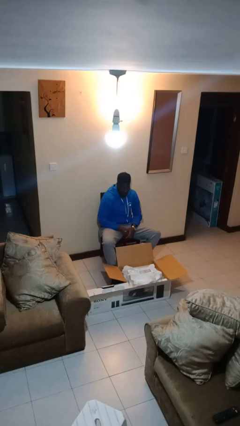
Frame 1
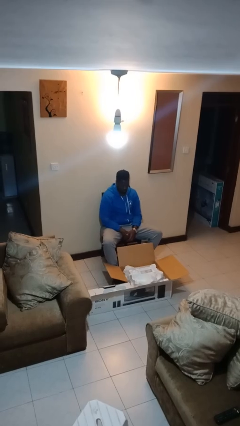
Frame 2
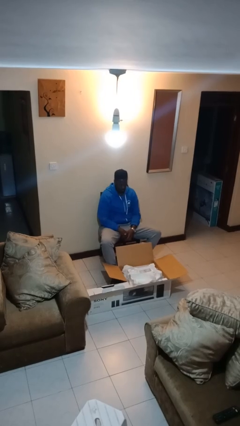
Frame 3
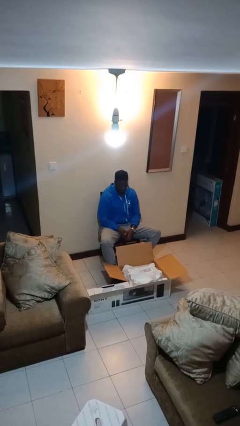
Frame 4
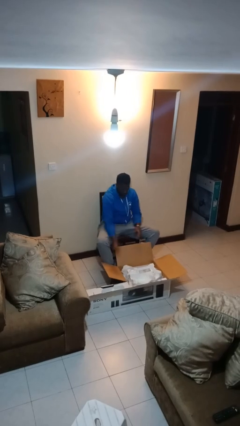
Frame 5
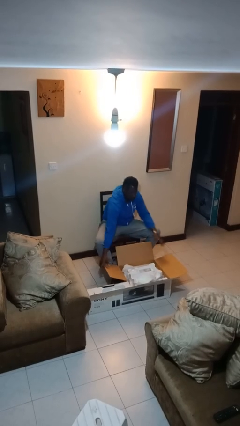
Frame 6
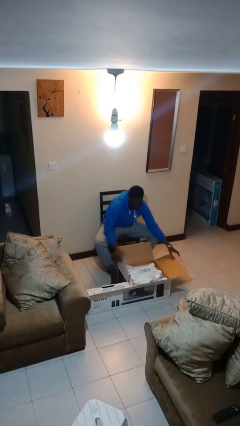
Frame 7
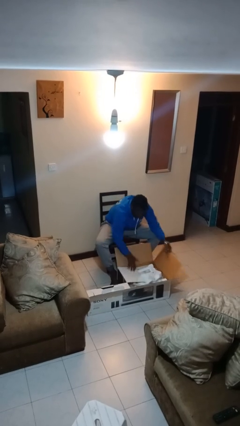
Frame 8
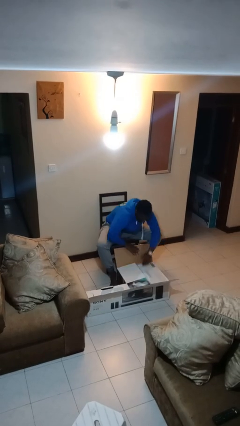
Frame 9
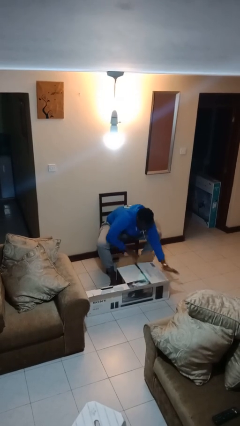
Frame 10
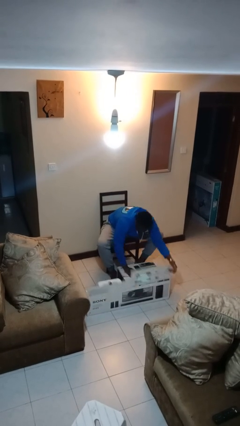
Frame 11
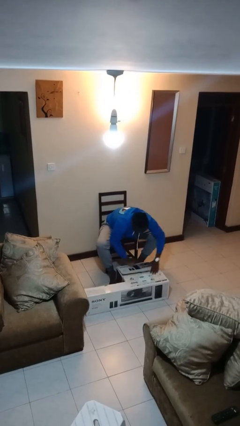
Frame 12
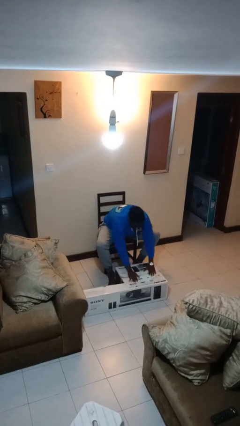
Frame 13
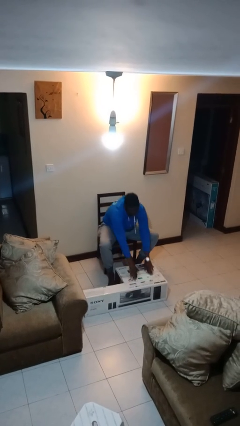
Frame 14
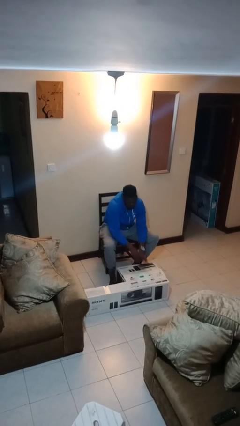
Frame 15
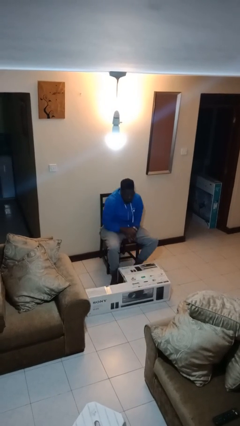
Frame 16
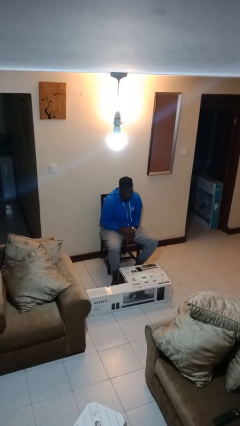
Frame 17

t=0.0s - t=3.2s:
person closes box

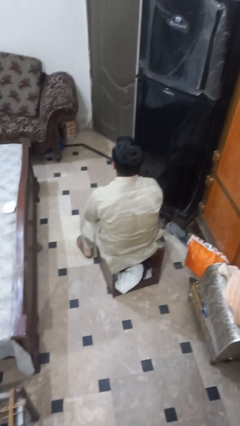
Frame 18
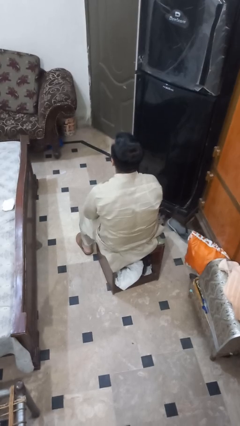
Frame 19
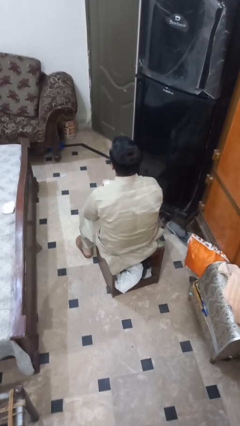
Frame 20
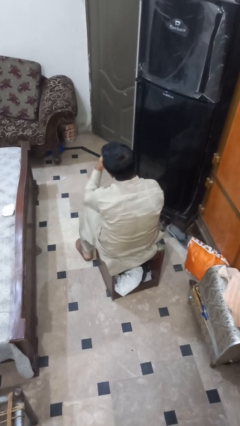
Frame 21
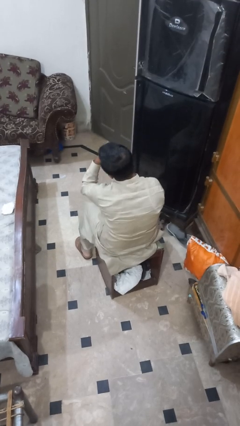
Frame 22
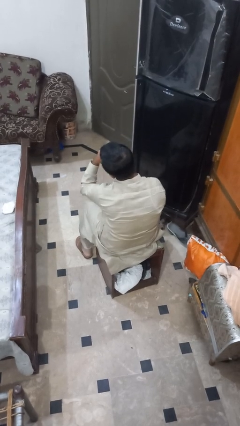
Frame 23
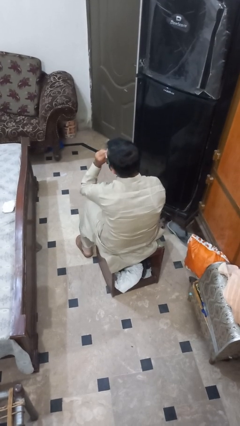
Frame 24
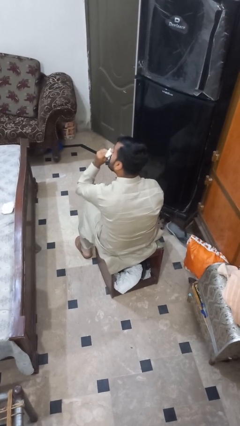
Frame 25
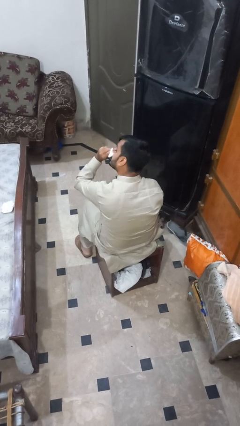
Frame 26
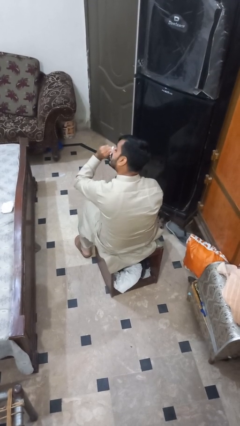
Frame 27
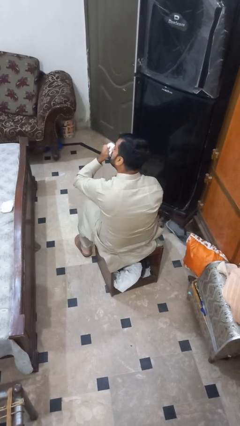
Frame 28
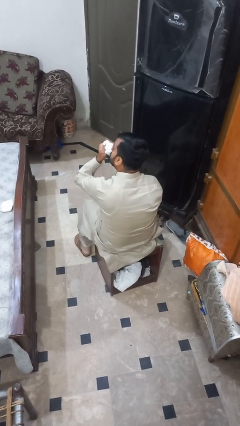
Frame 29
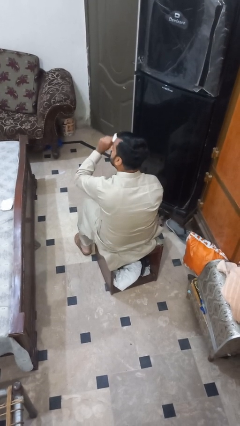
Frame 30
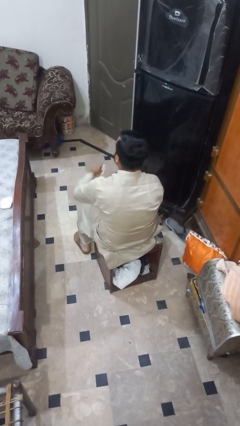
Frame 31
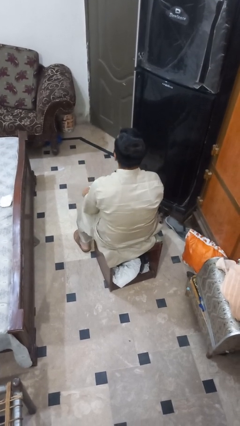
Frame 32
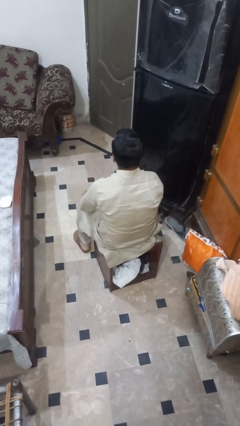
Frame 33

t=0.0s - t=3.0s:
person blows nose

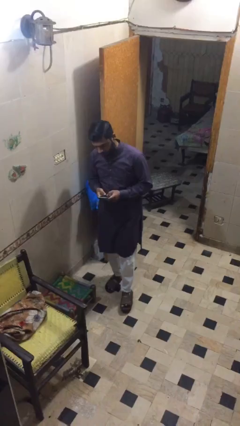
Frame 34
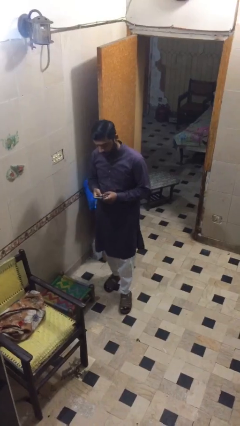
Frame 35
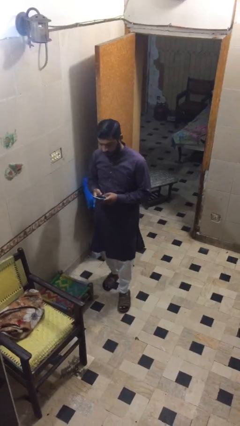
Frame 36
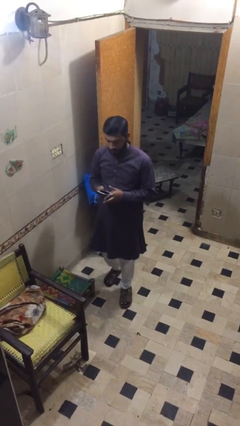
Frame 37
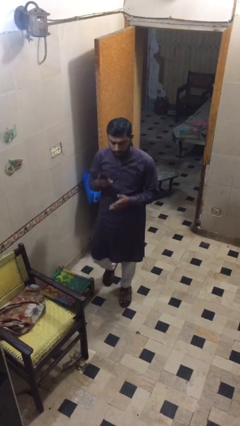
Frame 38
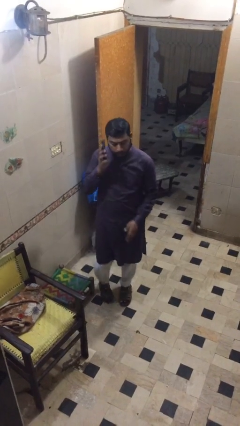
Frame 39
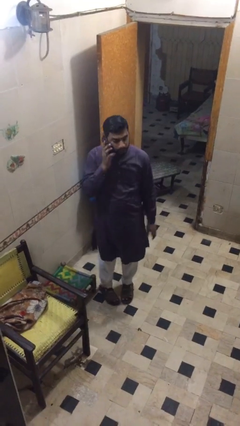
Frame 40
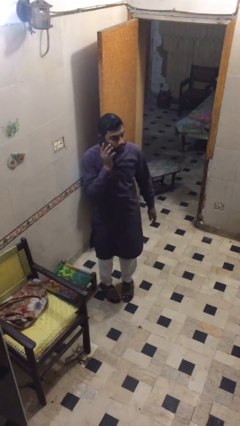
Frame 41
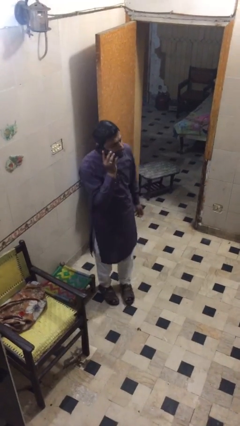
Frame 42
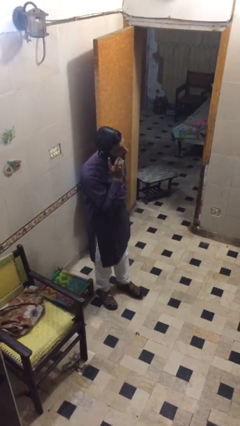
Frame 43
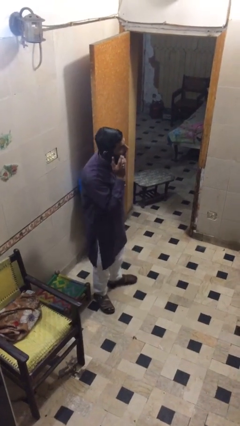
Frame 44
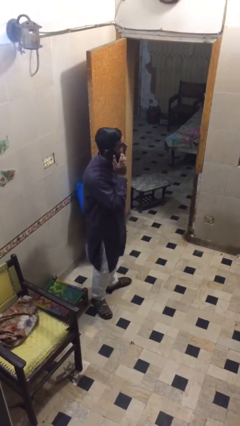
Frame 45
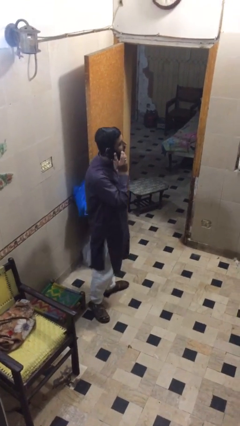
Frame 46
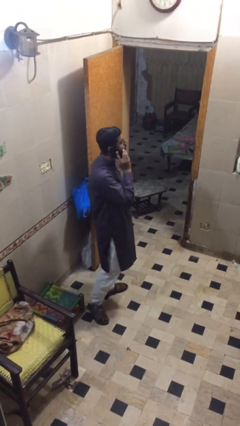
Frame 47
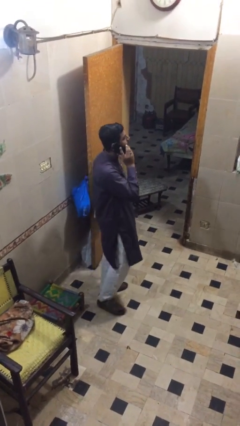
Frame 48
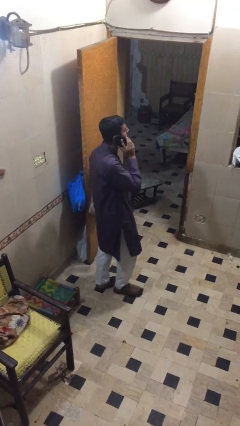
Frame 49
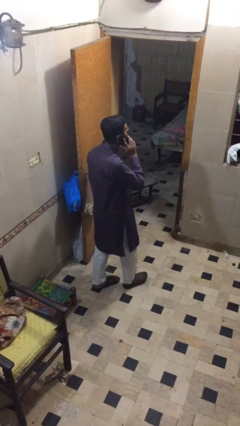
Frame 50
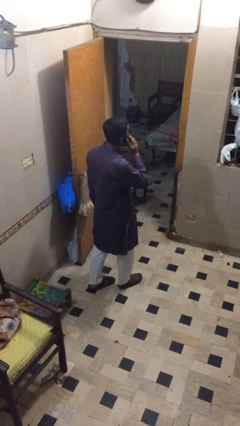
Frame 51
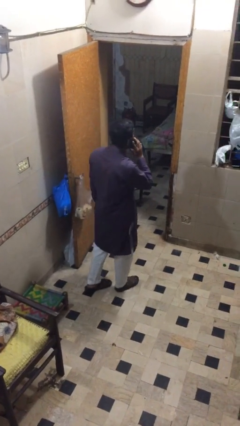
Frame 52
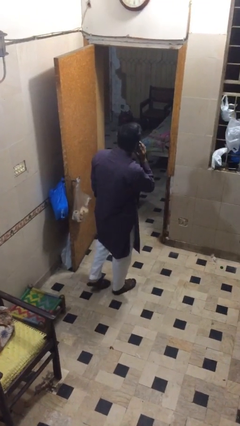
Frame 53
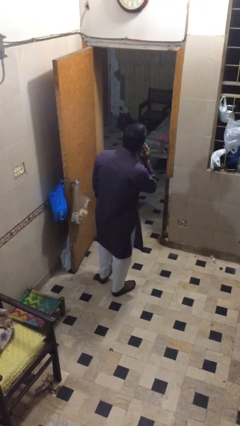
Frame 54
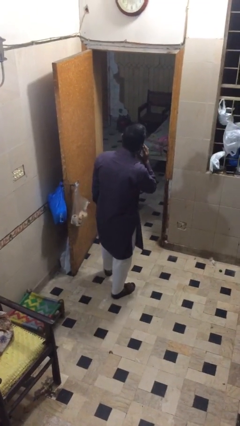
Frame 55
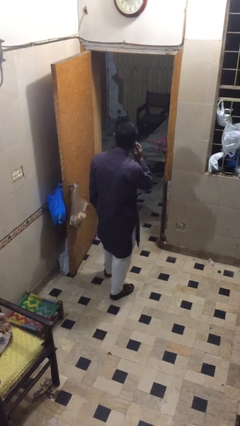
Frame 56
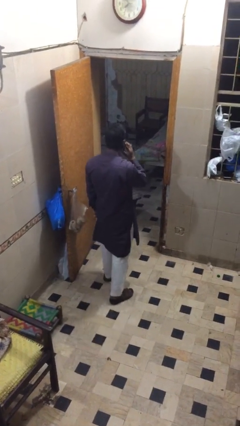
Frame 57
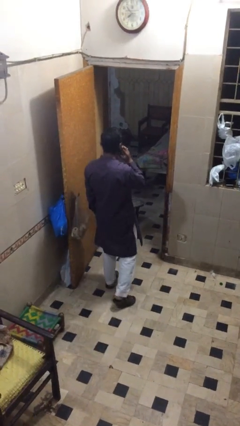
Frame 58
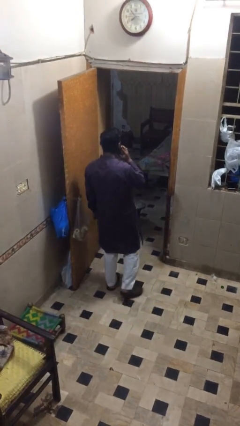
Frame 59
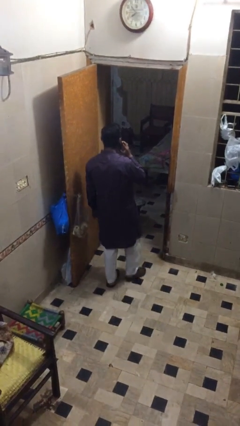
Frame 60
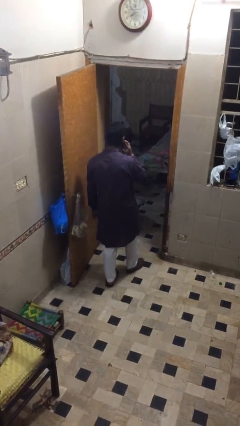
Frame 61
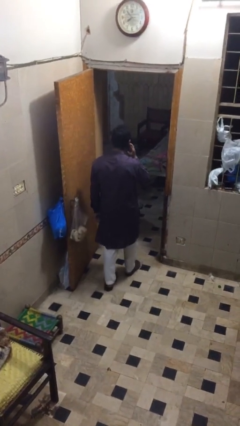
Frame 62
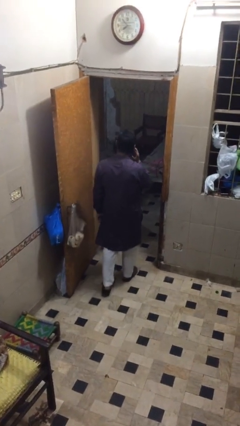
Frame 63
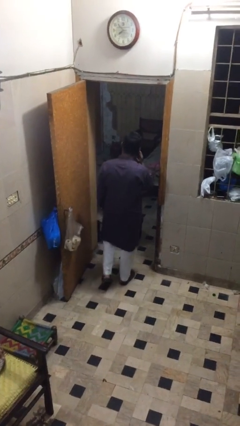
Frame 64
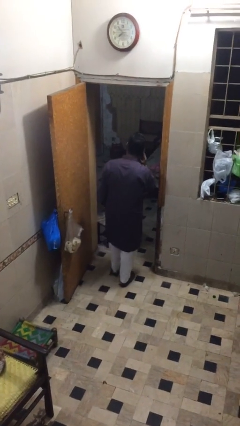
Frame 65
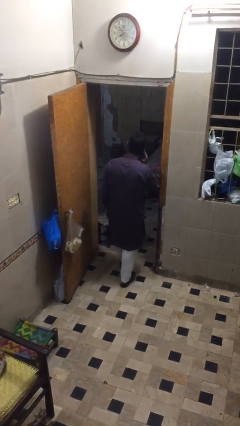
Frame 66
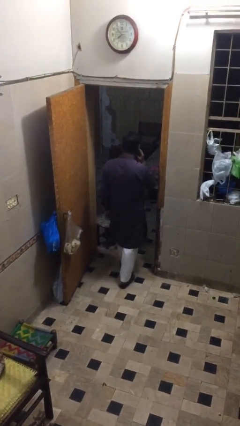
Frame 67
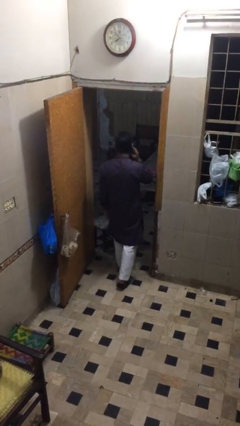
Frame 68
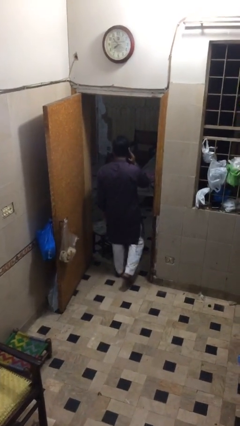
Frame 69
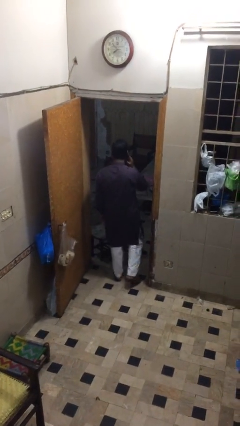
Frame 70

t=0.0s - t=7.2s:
person talks on phone

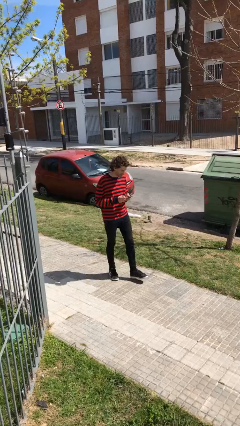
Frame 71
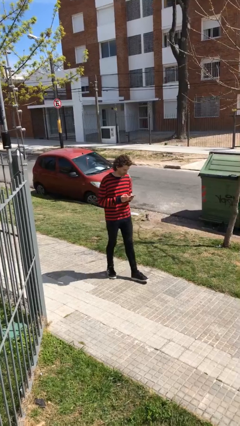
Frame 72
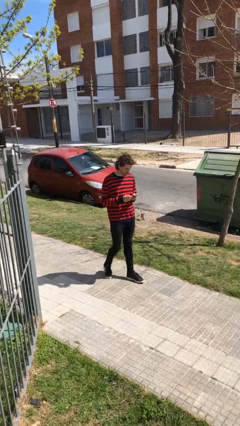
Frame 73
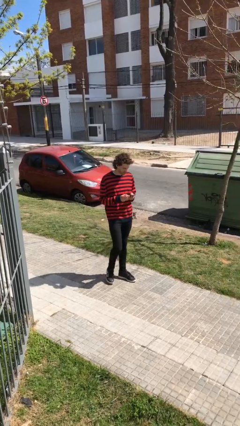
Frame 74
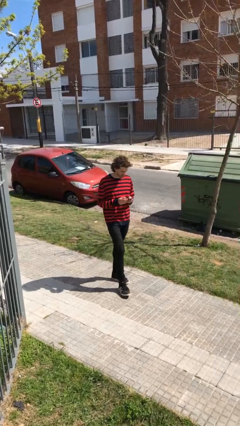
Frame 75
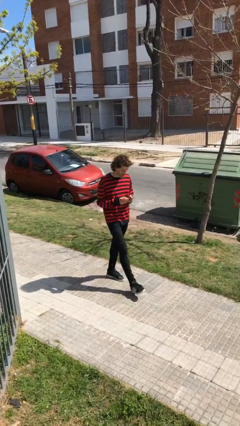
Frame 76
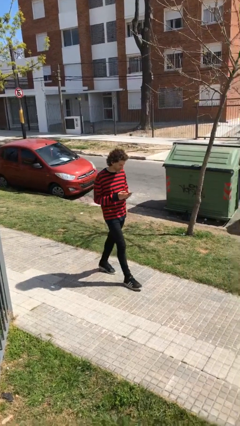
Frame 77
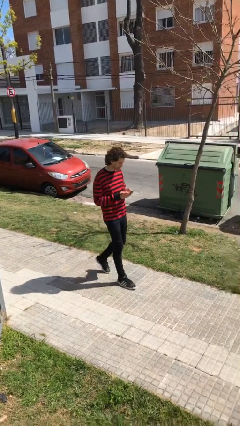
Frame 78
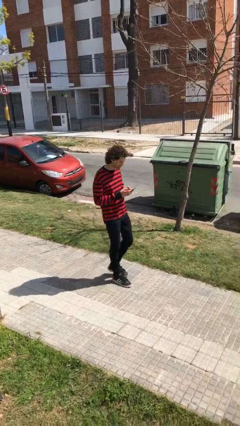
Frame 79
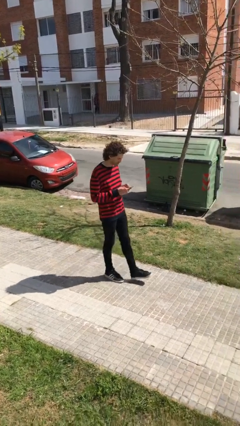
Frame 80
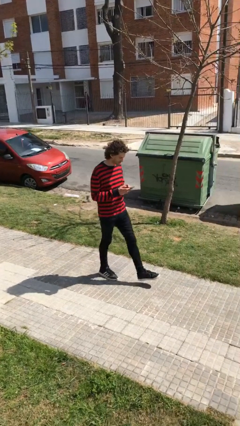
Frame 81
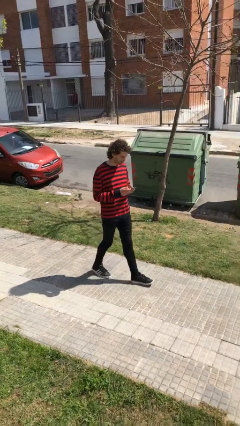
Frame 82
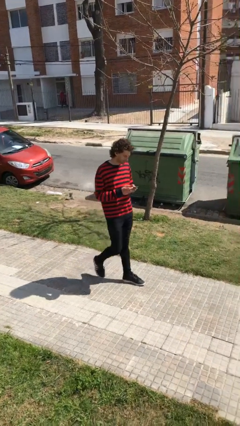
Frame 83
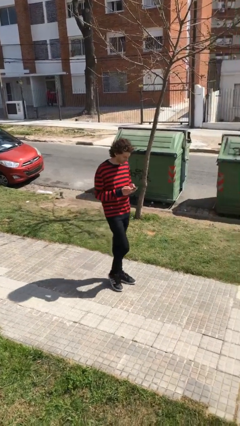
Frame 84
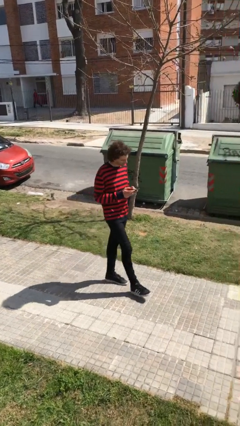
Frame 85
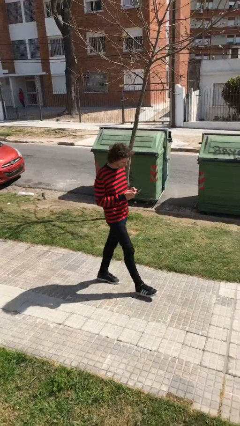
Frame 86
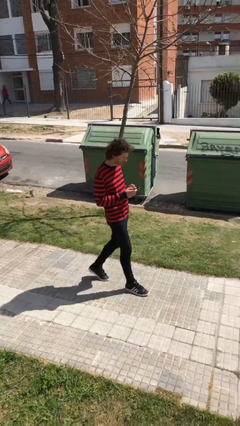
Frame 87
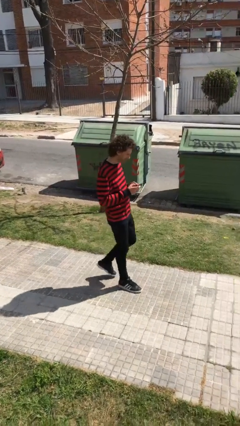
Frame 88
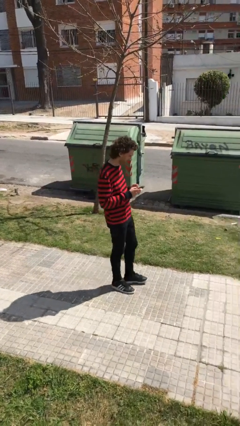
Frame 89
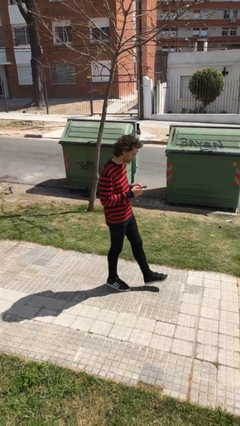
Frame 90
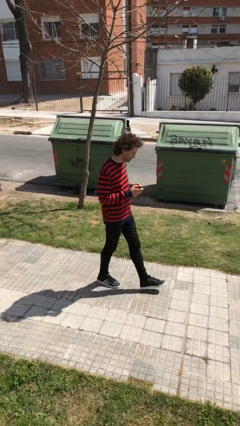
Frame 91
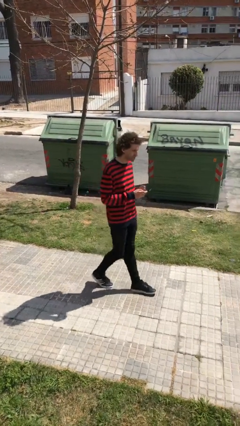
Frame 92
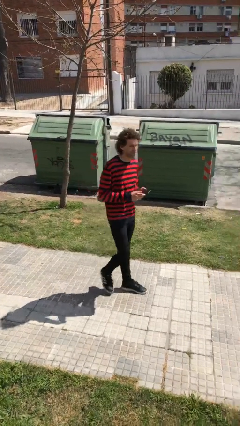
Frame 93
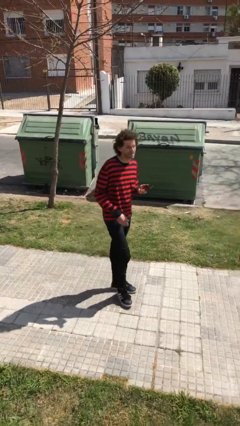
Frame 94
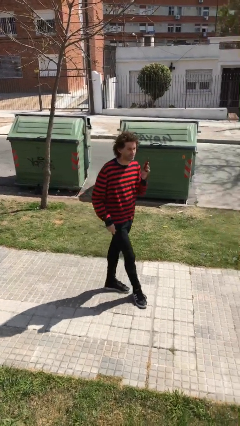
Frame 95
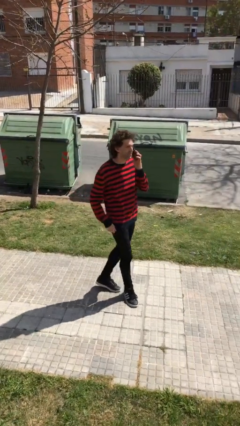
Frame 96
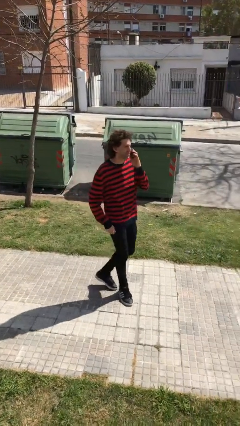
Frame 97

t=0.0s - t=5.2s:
person texts on phone
